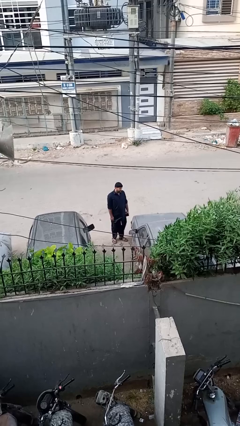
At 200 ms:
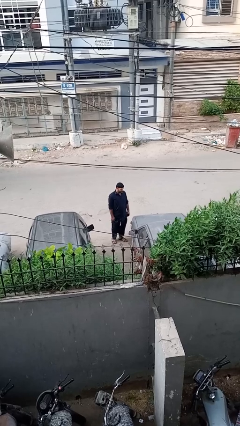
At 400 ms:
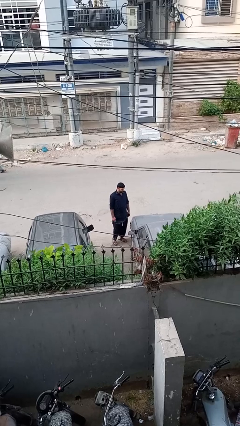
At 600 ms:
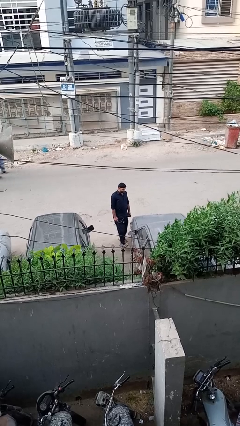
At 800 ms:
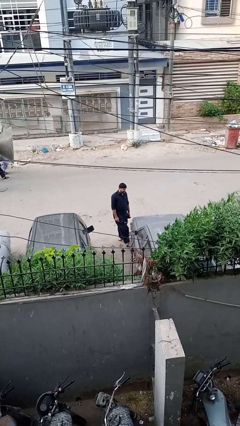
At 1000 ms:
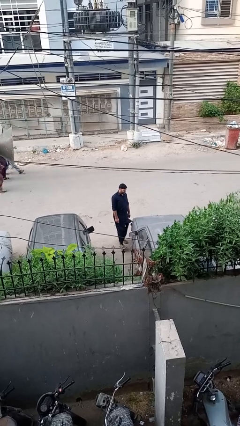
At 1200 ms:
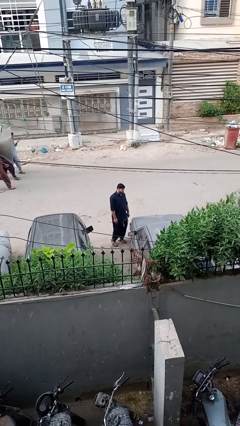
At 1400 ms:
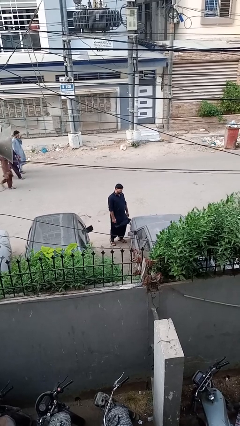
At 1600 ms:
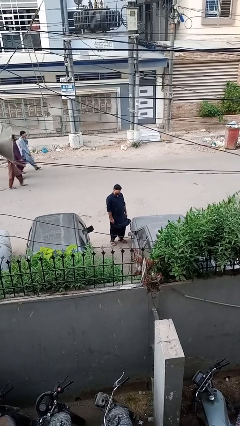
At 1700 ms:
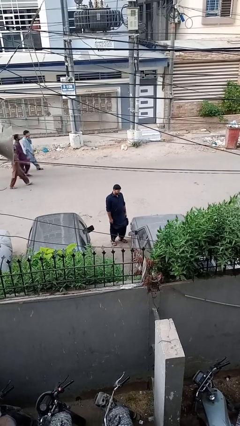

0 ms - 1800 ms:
person kicks car tires

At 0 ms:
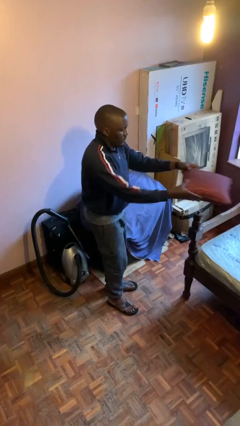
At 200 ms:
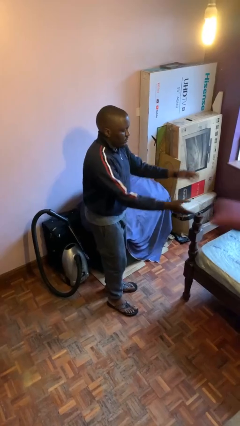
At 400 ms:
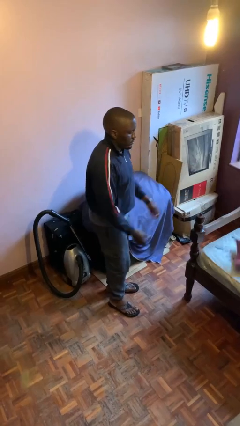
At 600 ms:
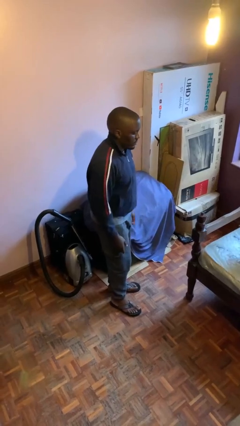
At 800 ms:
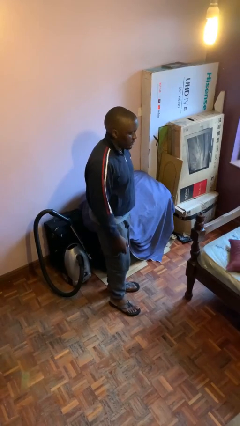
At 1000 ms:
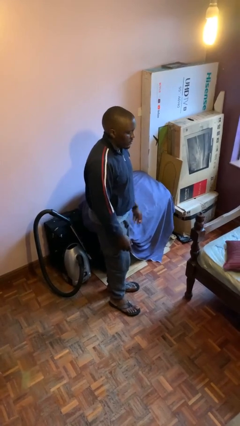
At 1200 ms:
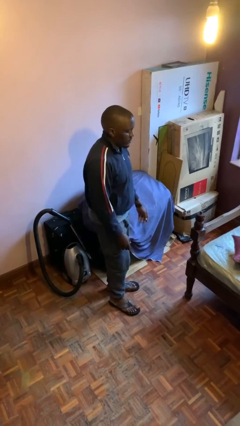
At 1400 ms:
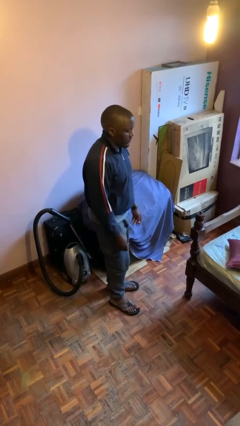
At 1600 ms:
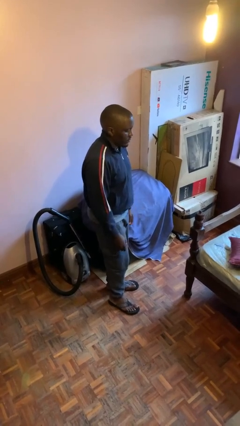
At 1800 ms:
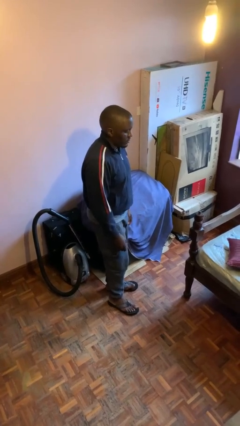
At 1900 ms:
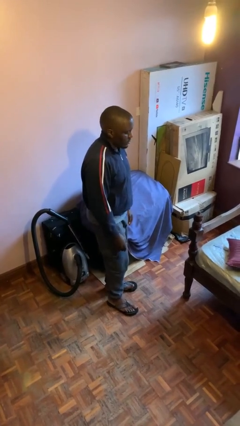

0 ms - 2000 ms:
person throws object on bed

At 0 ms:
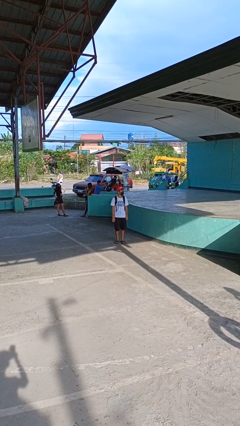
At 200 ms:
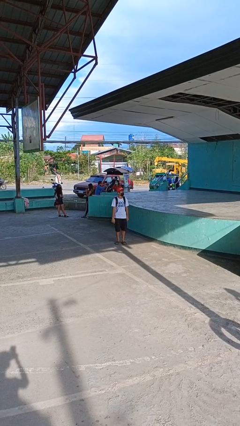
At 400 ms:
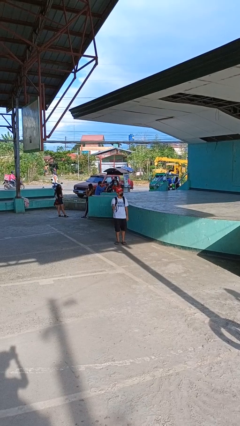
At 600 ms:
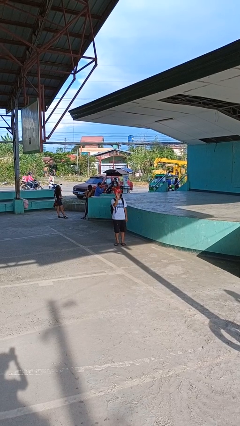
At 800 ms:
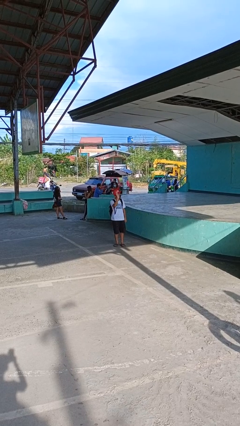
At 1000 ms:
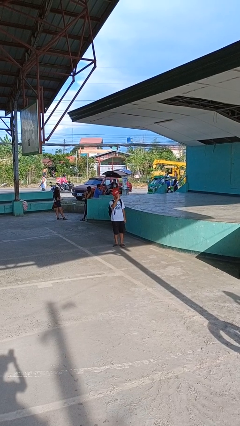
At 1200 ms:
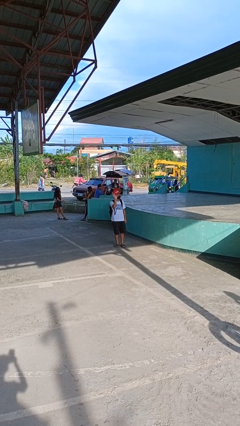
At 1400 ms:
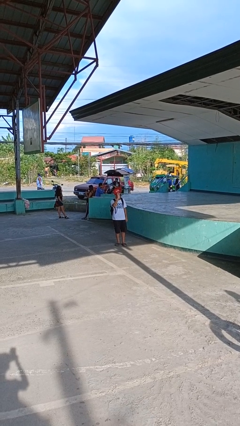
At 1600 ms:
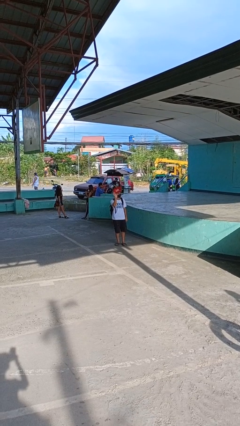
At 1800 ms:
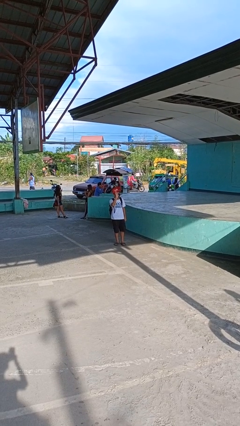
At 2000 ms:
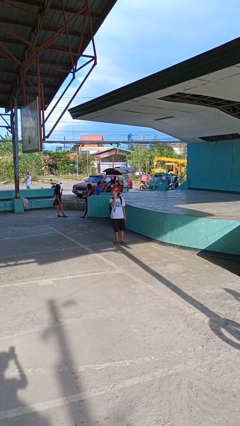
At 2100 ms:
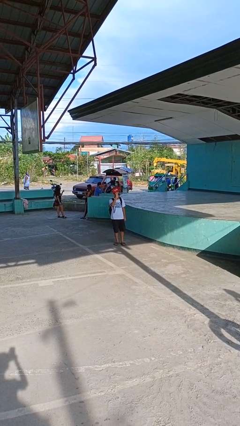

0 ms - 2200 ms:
person waves at person

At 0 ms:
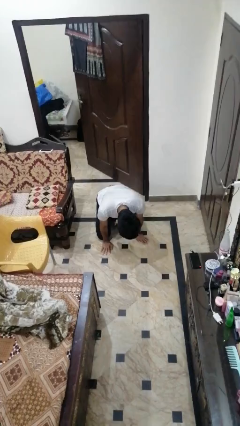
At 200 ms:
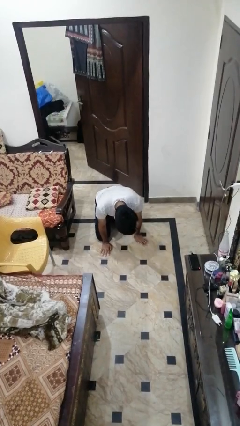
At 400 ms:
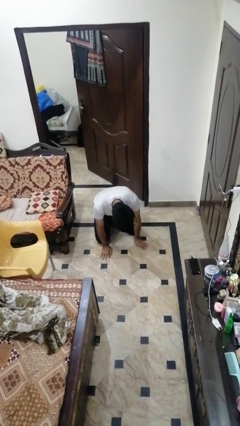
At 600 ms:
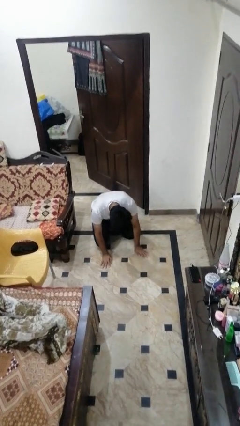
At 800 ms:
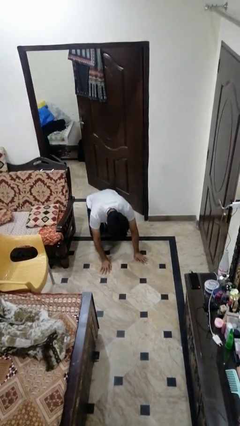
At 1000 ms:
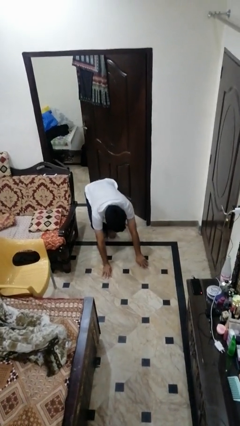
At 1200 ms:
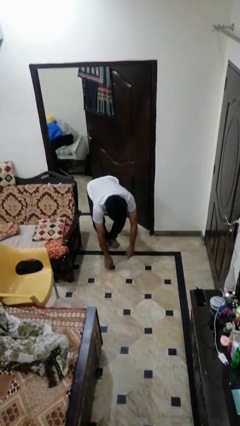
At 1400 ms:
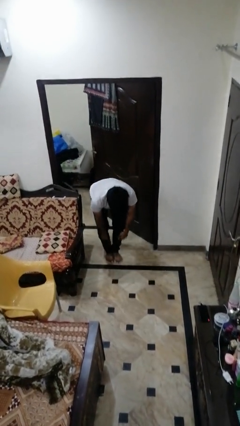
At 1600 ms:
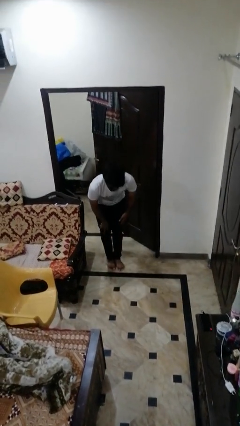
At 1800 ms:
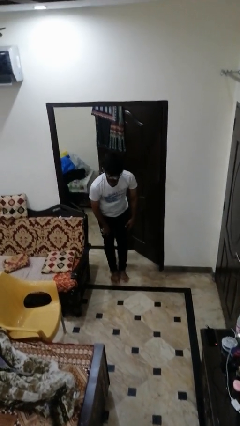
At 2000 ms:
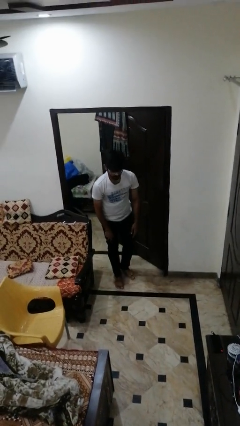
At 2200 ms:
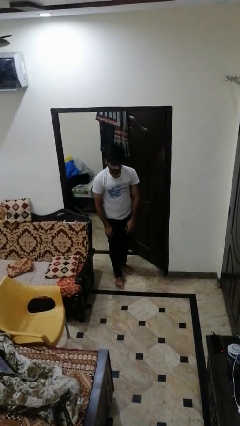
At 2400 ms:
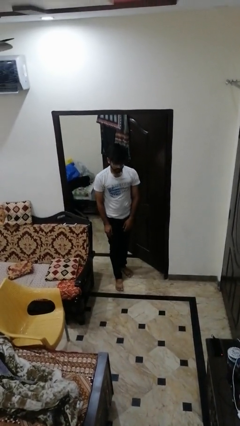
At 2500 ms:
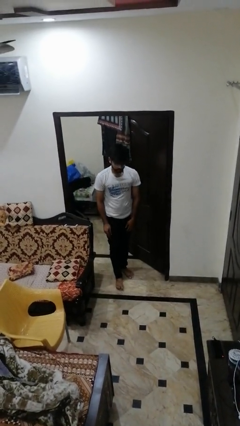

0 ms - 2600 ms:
person stands up from floor

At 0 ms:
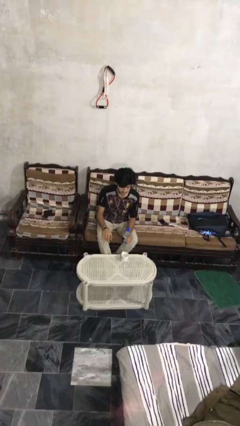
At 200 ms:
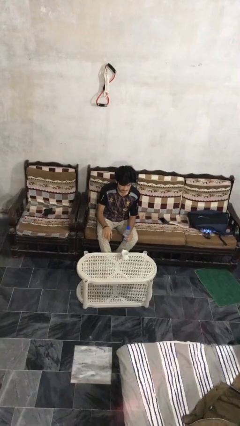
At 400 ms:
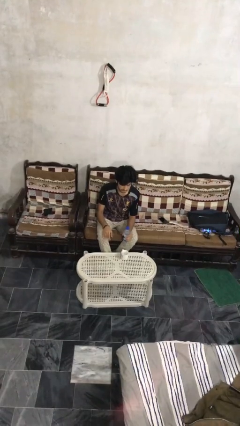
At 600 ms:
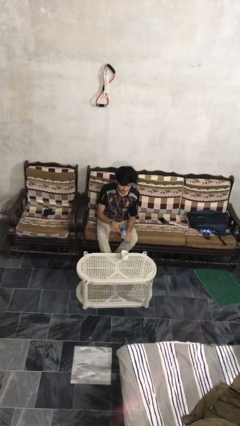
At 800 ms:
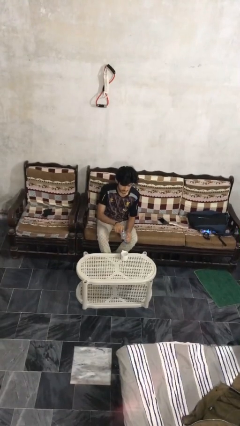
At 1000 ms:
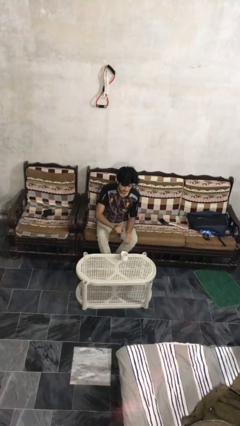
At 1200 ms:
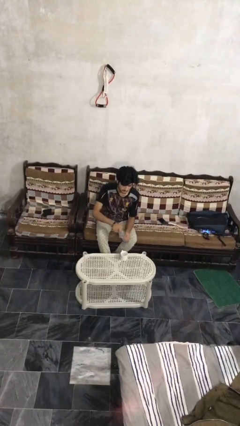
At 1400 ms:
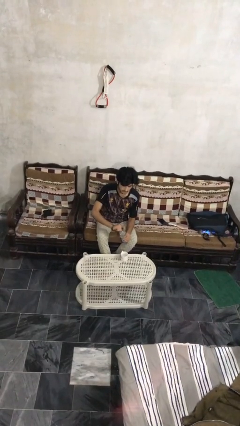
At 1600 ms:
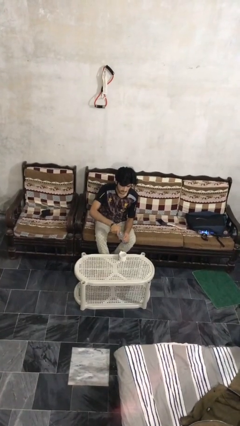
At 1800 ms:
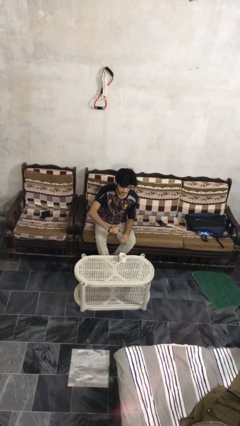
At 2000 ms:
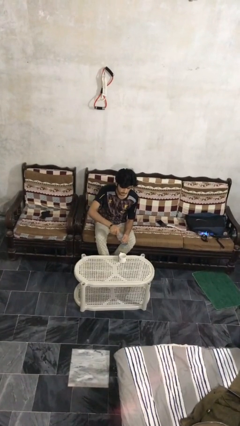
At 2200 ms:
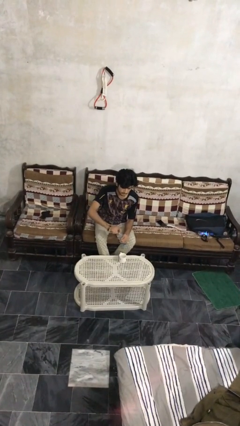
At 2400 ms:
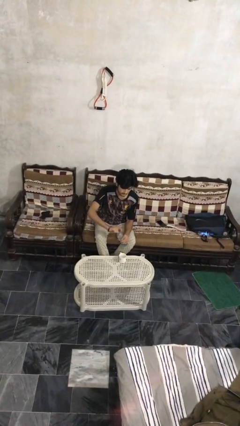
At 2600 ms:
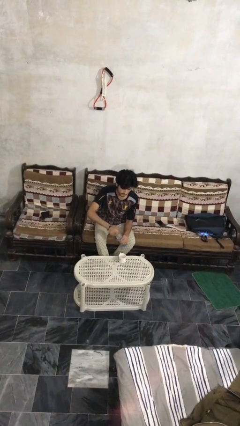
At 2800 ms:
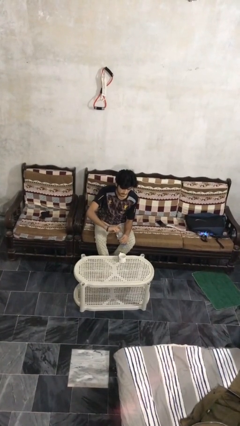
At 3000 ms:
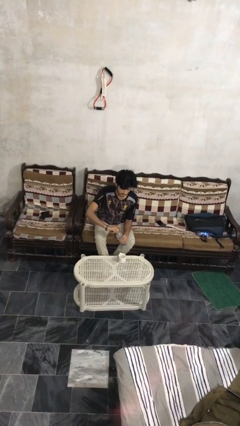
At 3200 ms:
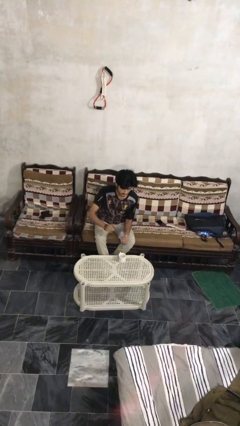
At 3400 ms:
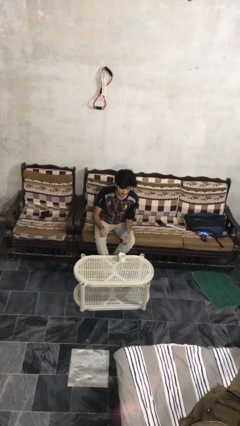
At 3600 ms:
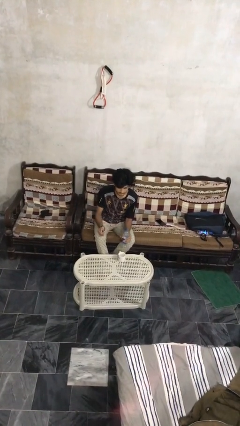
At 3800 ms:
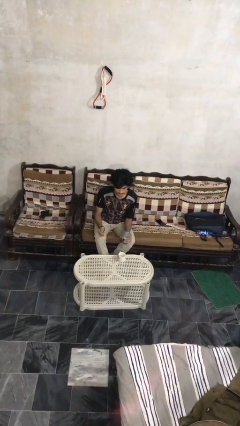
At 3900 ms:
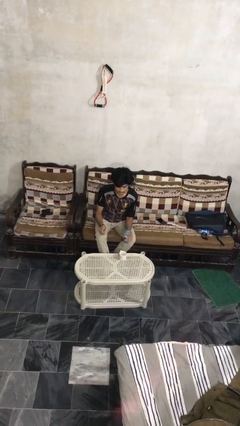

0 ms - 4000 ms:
person unscrews lid from bottle

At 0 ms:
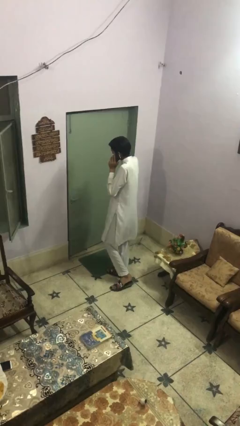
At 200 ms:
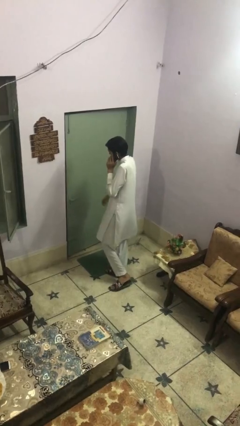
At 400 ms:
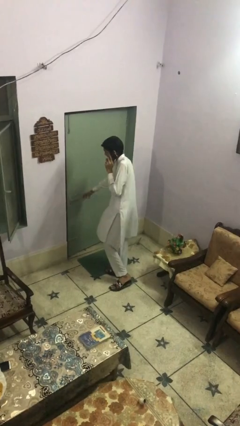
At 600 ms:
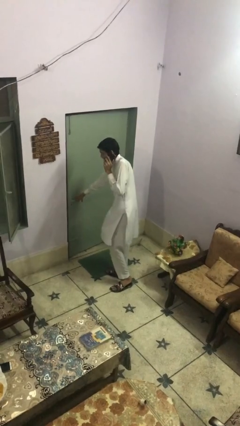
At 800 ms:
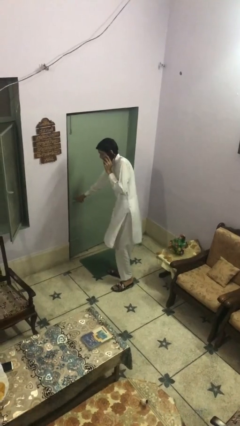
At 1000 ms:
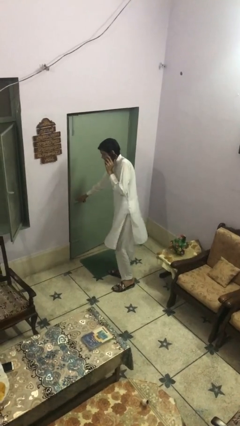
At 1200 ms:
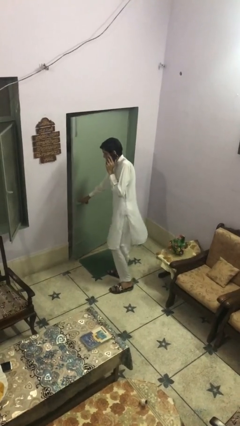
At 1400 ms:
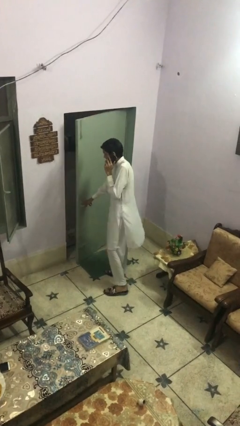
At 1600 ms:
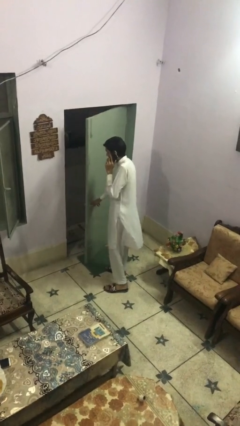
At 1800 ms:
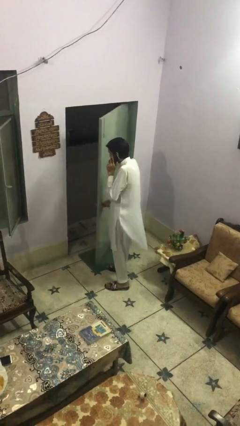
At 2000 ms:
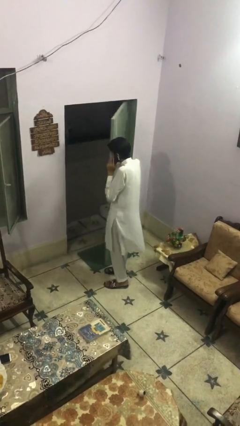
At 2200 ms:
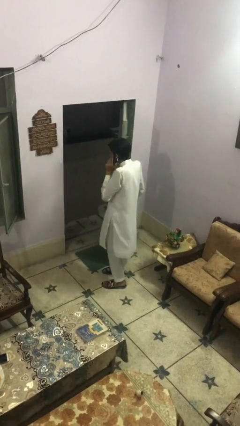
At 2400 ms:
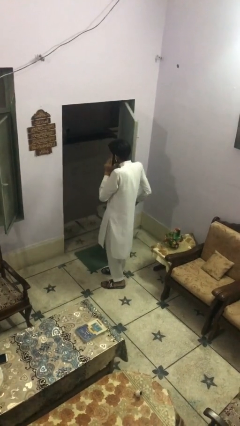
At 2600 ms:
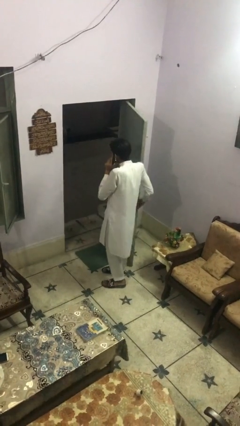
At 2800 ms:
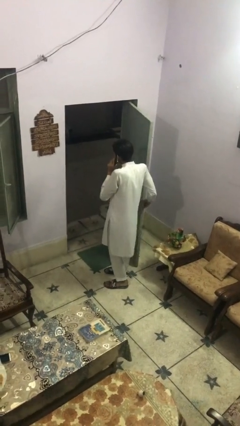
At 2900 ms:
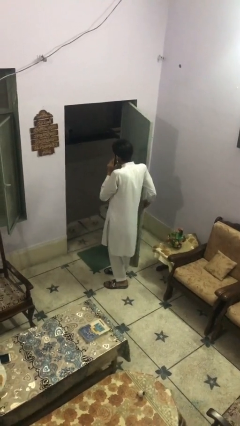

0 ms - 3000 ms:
person opens facility door

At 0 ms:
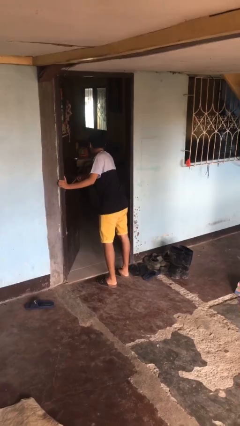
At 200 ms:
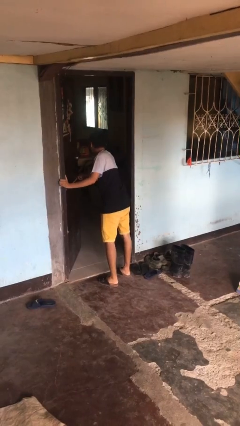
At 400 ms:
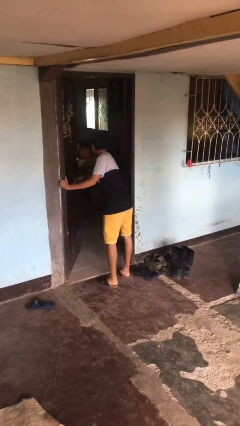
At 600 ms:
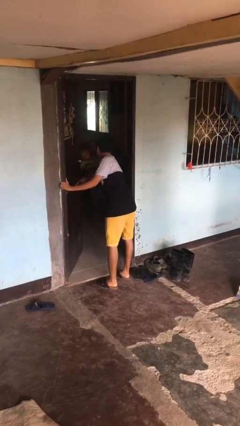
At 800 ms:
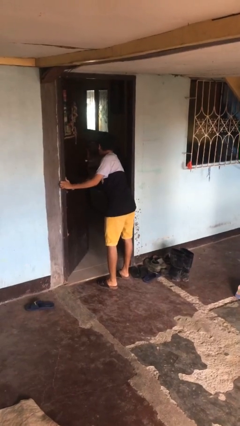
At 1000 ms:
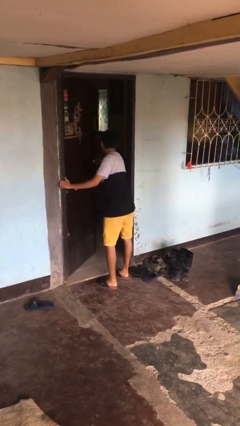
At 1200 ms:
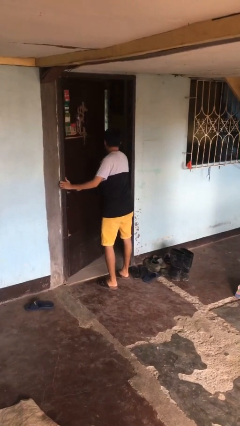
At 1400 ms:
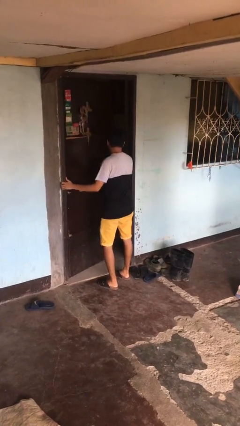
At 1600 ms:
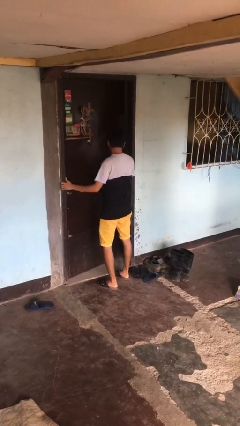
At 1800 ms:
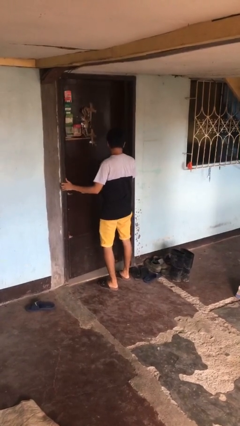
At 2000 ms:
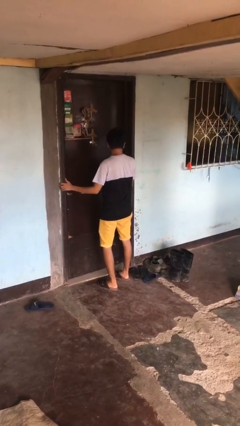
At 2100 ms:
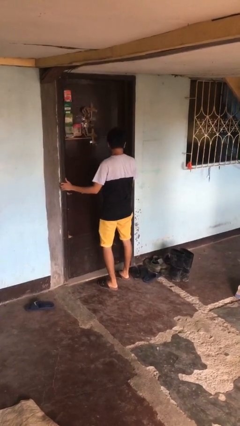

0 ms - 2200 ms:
person closes facility door
